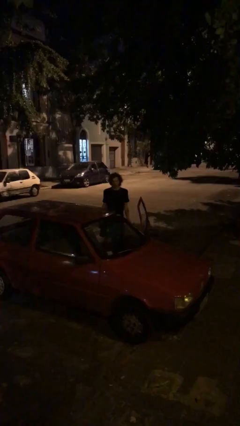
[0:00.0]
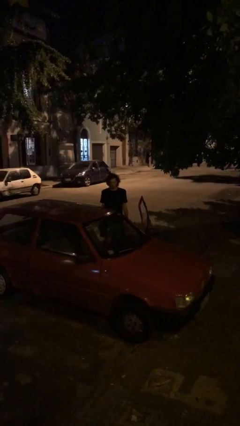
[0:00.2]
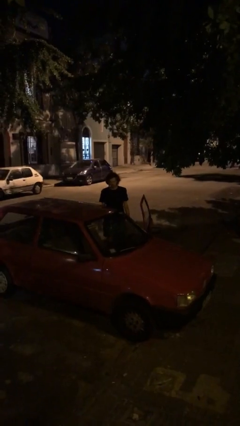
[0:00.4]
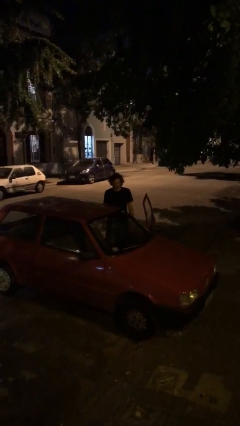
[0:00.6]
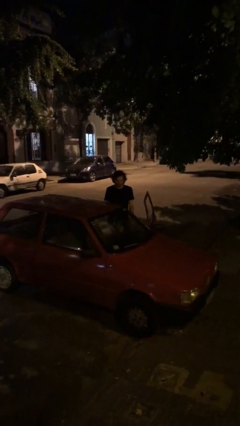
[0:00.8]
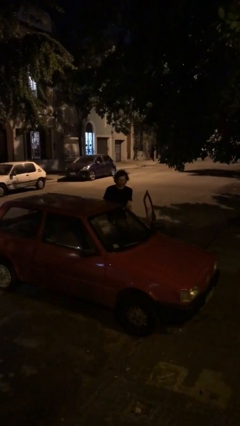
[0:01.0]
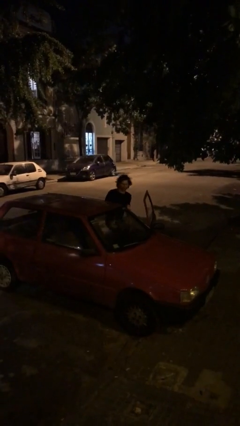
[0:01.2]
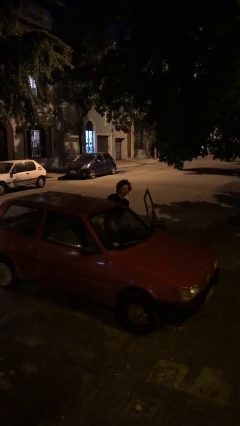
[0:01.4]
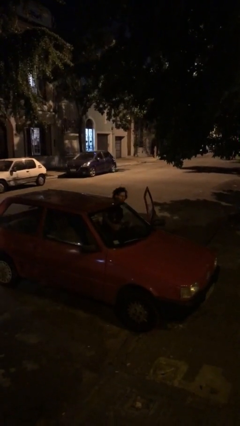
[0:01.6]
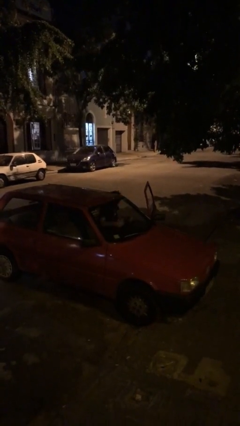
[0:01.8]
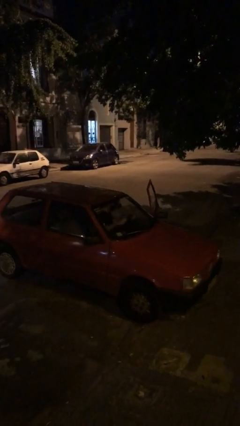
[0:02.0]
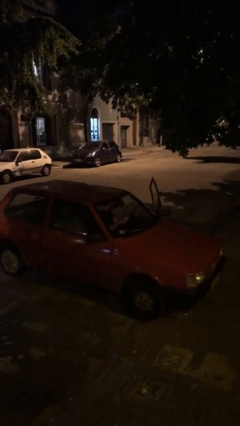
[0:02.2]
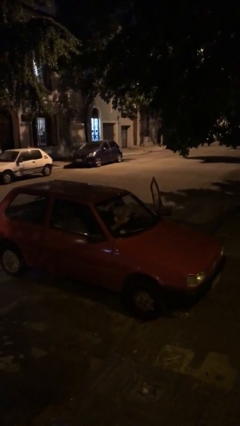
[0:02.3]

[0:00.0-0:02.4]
person enters car

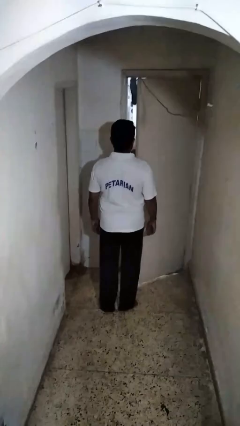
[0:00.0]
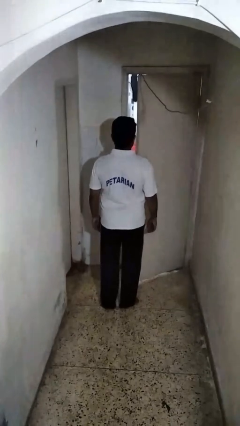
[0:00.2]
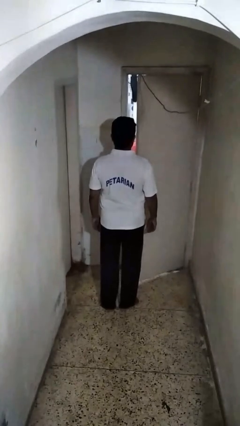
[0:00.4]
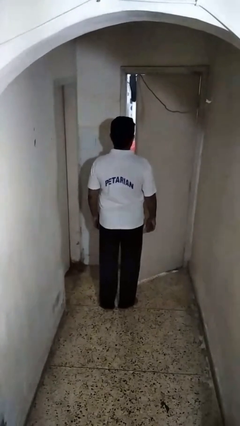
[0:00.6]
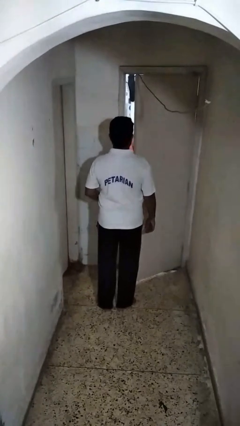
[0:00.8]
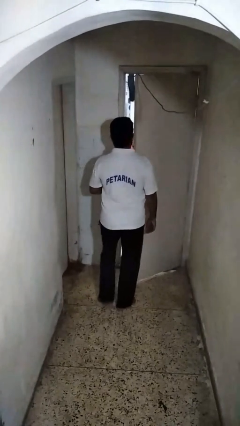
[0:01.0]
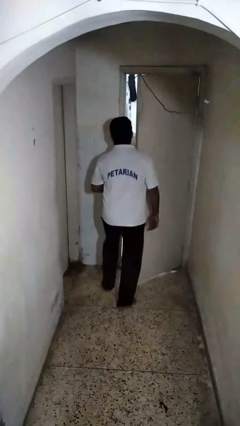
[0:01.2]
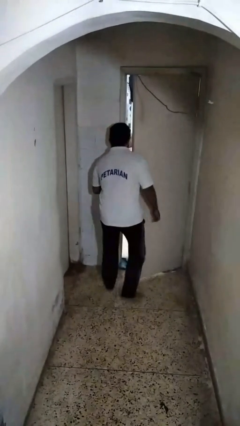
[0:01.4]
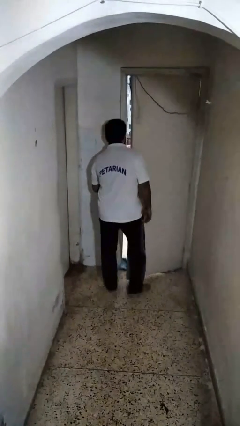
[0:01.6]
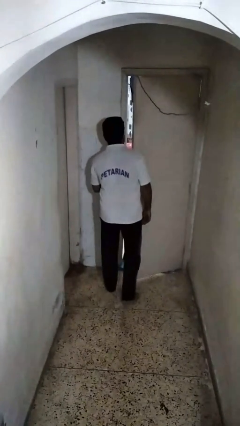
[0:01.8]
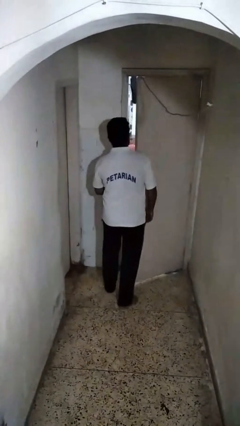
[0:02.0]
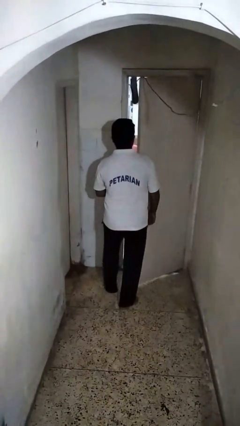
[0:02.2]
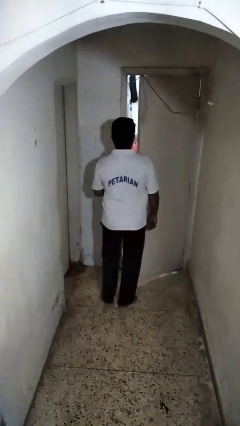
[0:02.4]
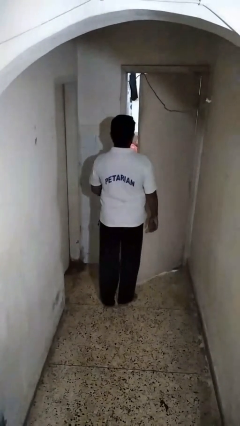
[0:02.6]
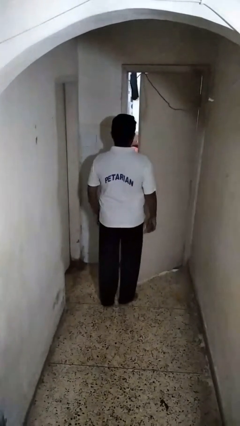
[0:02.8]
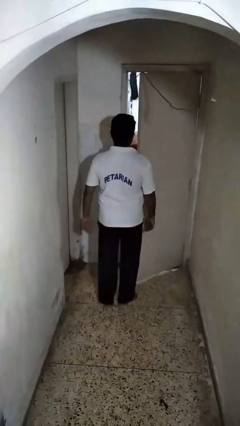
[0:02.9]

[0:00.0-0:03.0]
person bumps into wall

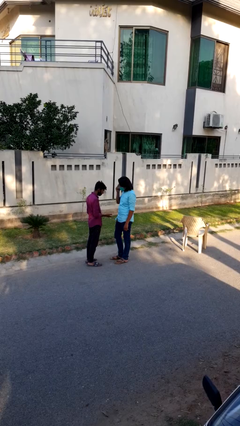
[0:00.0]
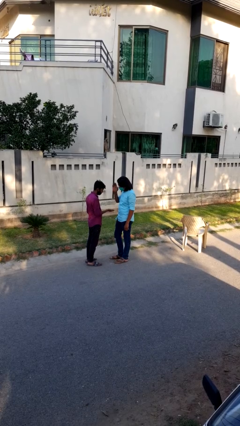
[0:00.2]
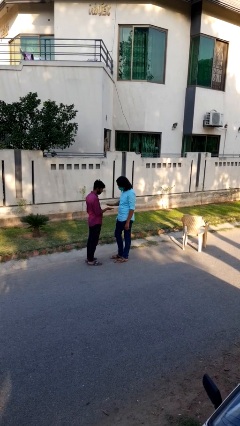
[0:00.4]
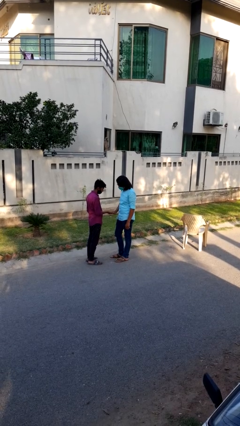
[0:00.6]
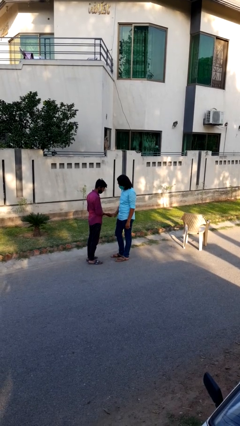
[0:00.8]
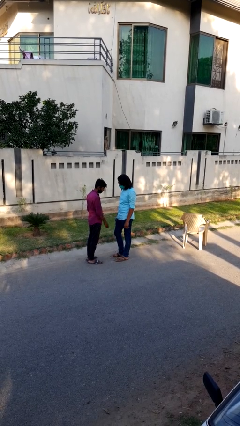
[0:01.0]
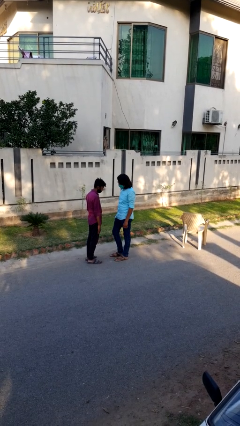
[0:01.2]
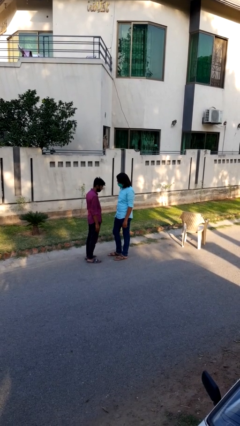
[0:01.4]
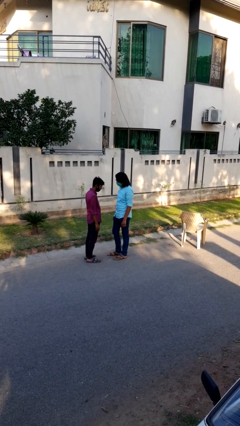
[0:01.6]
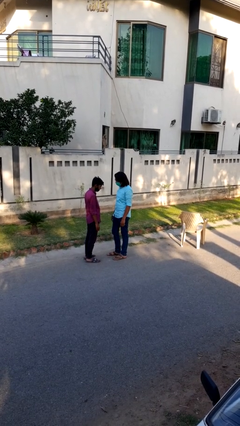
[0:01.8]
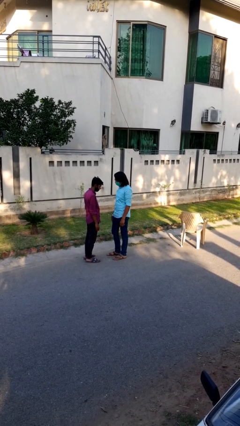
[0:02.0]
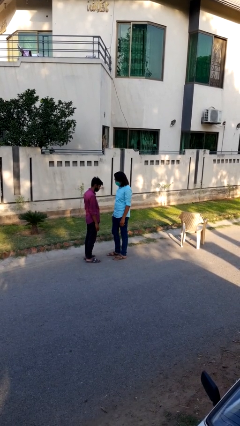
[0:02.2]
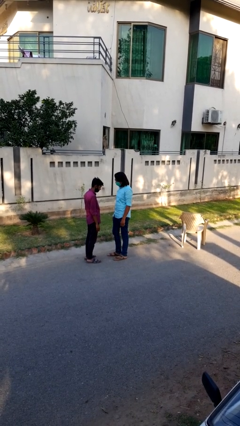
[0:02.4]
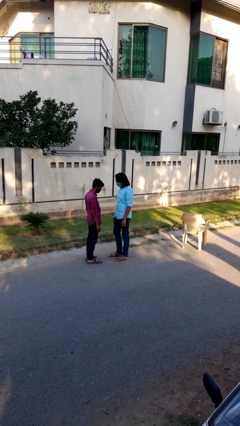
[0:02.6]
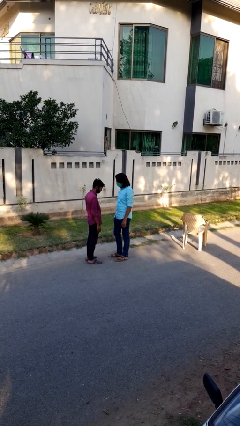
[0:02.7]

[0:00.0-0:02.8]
person highfives hand

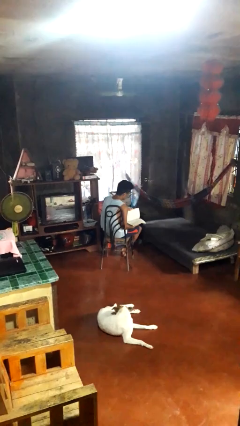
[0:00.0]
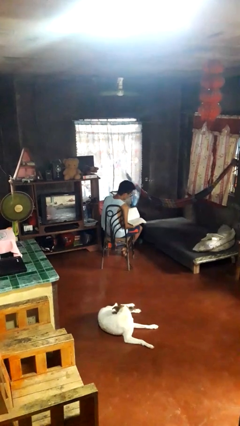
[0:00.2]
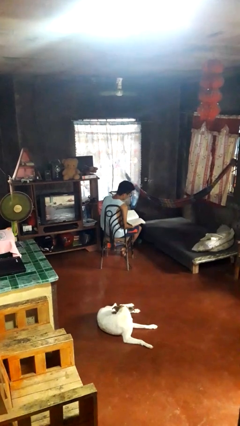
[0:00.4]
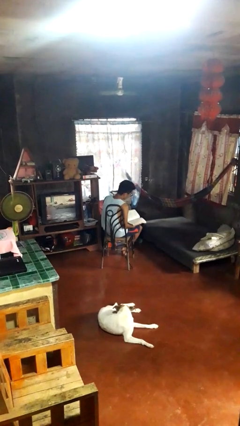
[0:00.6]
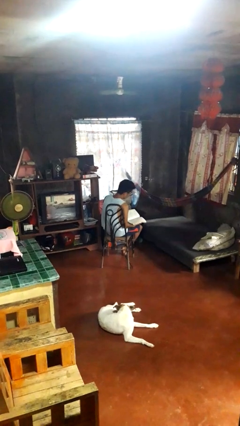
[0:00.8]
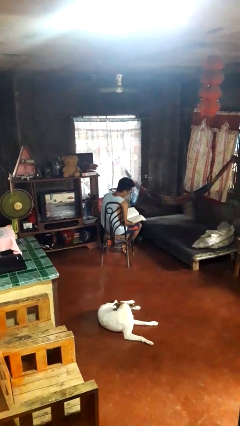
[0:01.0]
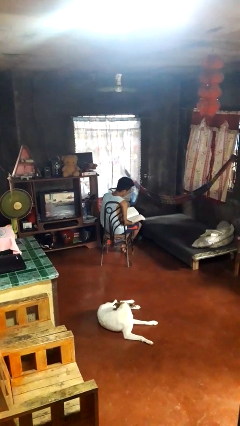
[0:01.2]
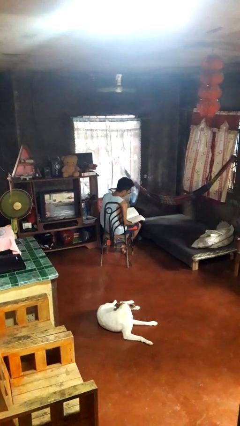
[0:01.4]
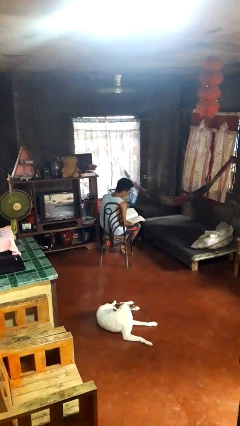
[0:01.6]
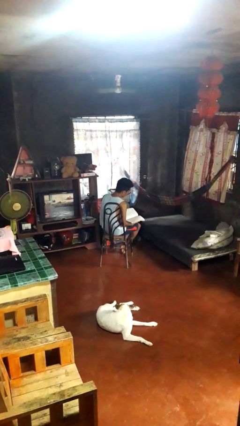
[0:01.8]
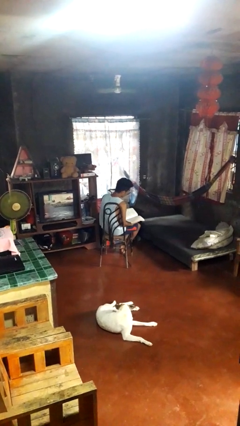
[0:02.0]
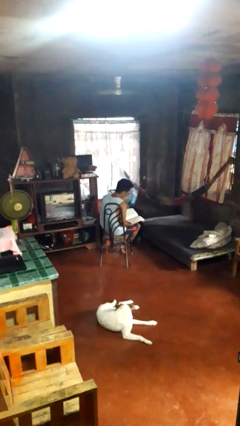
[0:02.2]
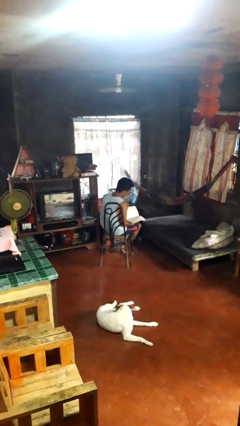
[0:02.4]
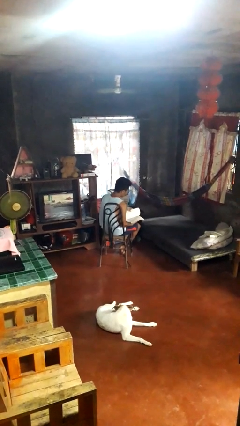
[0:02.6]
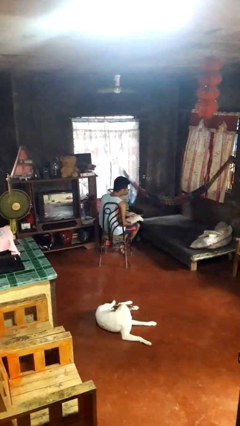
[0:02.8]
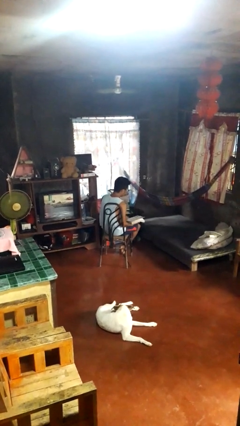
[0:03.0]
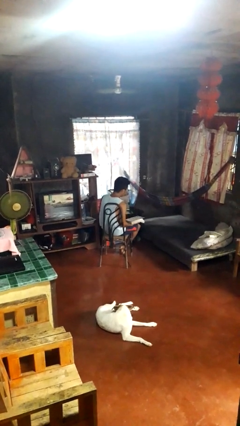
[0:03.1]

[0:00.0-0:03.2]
person reads book

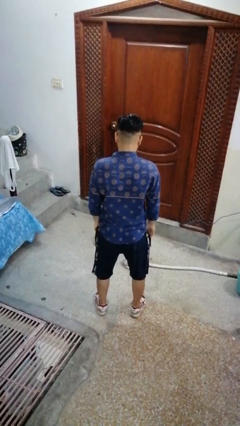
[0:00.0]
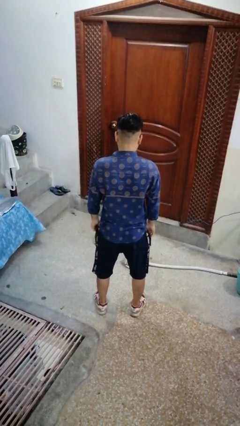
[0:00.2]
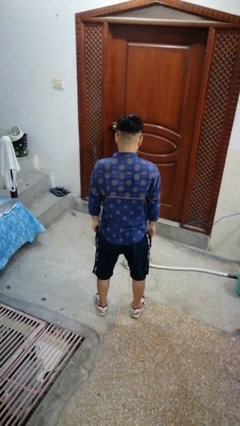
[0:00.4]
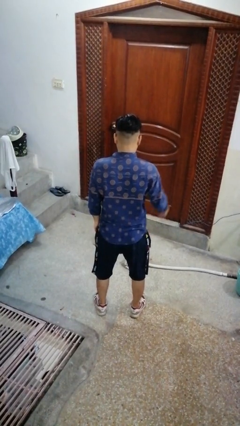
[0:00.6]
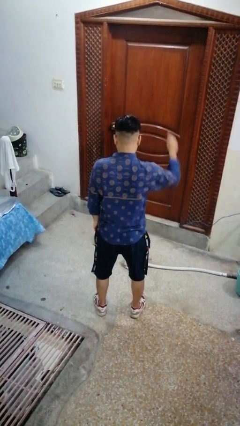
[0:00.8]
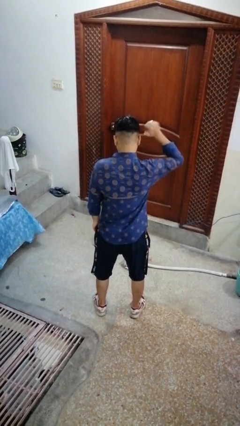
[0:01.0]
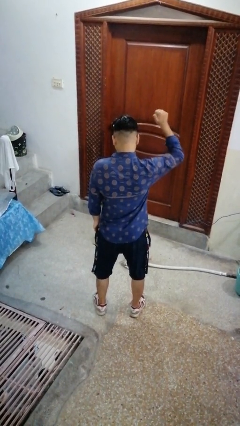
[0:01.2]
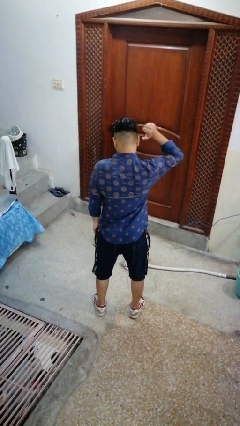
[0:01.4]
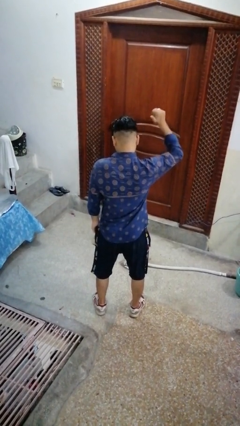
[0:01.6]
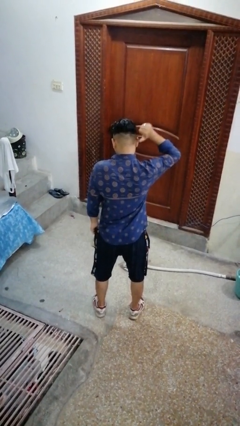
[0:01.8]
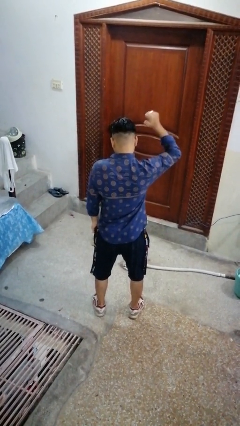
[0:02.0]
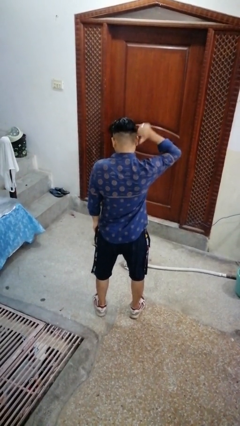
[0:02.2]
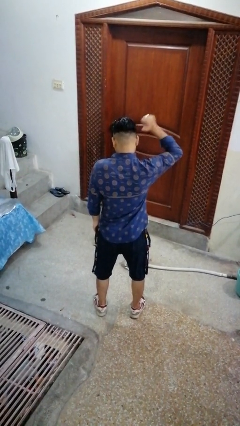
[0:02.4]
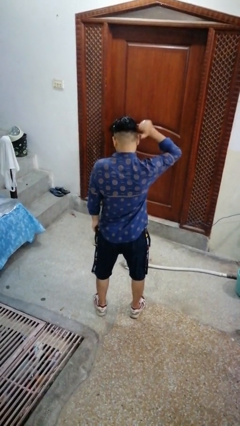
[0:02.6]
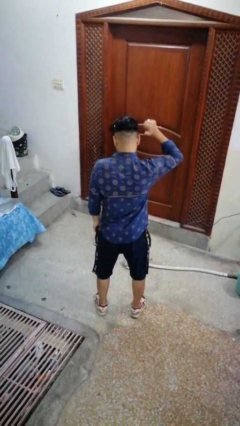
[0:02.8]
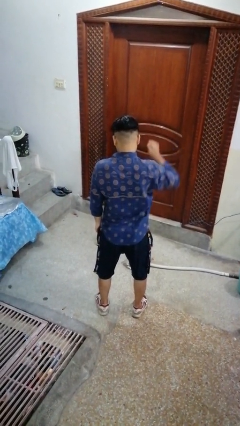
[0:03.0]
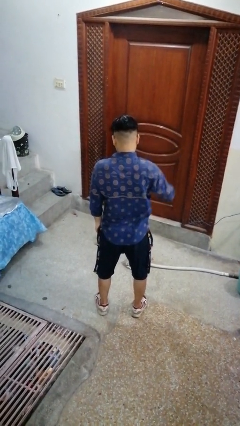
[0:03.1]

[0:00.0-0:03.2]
person gestures behind me

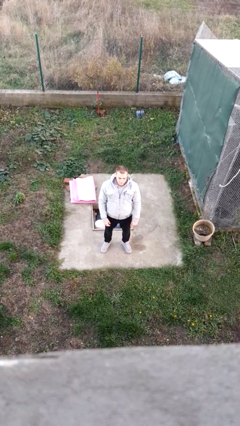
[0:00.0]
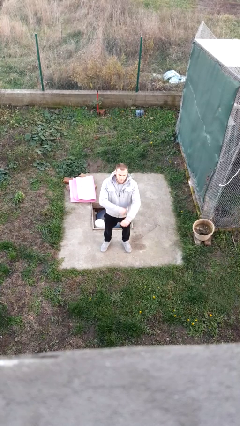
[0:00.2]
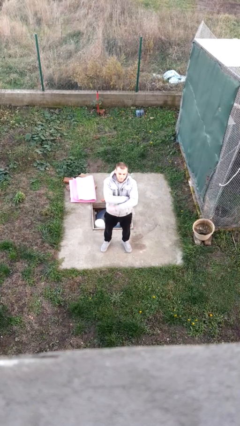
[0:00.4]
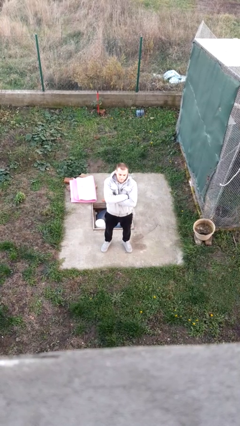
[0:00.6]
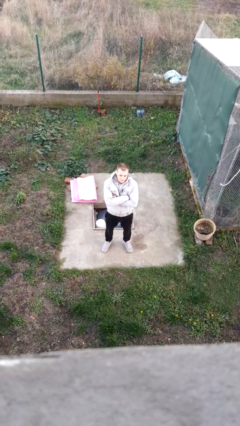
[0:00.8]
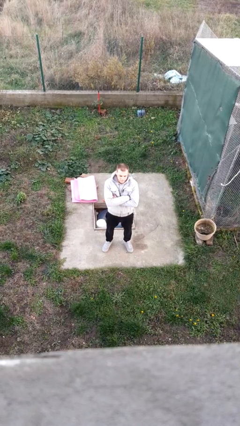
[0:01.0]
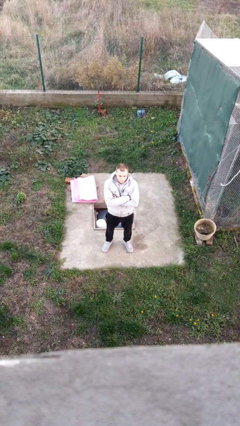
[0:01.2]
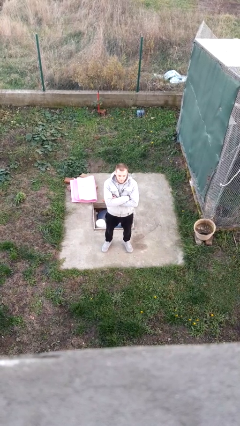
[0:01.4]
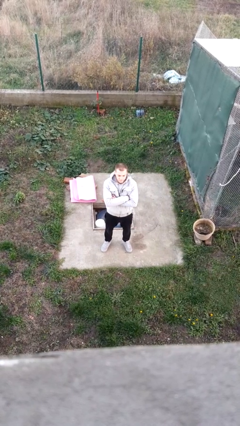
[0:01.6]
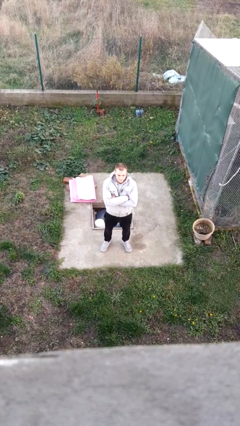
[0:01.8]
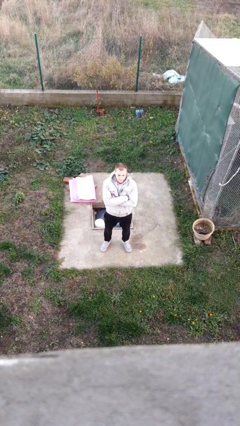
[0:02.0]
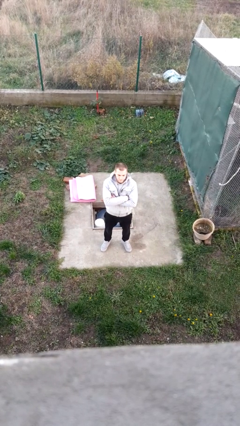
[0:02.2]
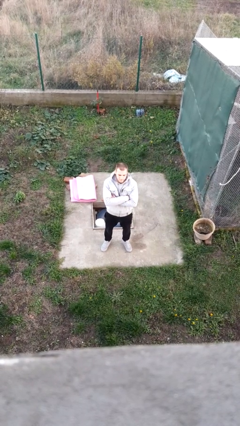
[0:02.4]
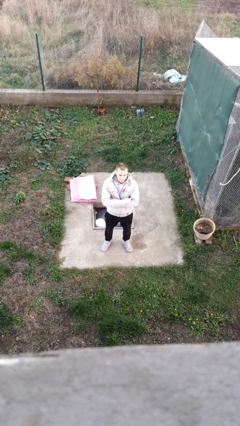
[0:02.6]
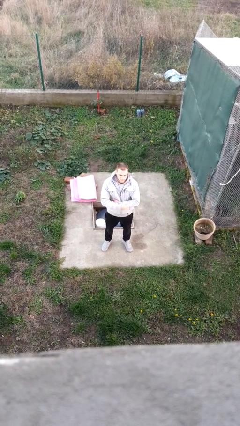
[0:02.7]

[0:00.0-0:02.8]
person crosses arms

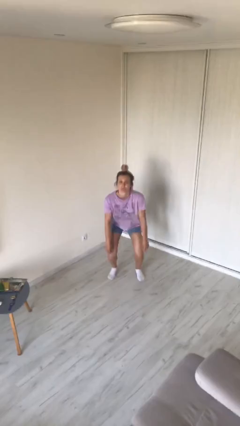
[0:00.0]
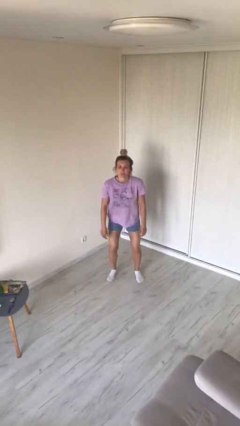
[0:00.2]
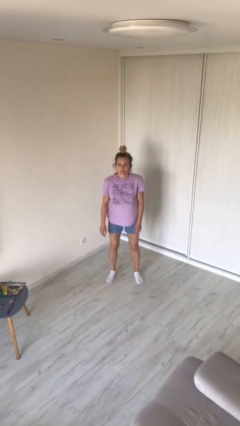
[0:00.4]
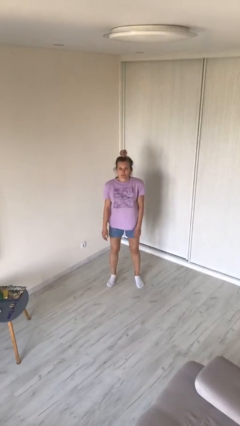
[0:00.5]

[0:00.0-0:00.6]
person stands up
